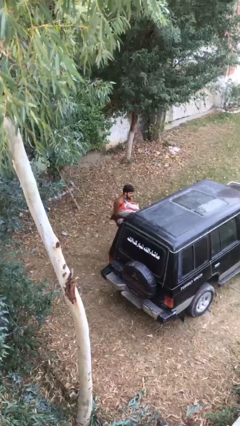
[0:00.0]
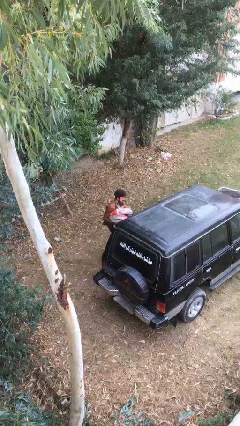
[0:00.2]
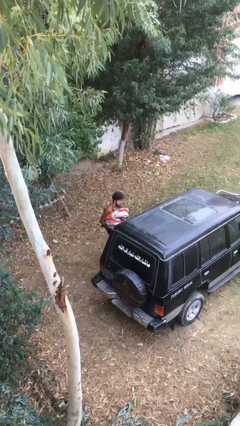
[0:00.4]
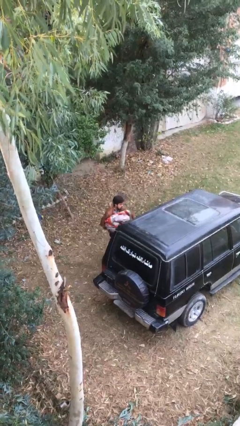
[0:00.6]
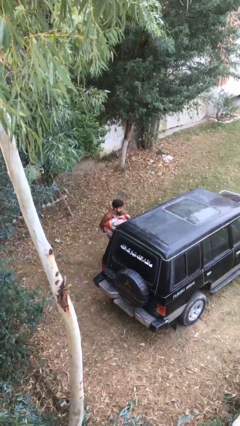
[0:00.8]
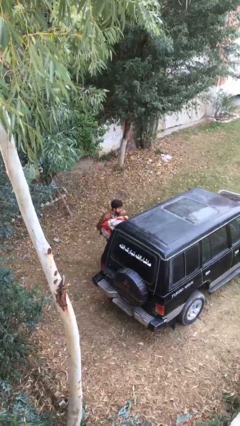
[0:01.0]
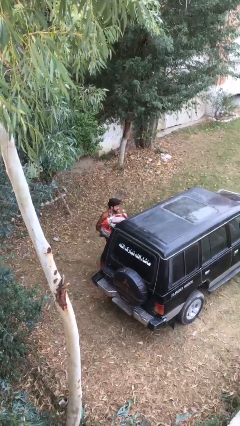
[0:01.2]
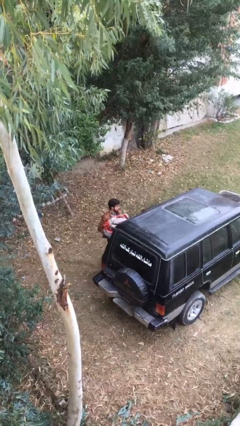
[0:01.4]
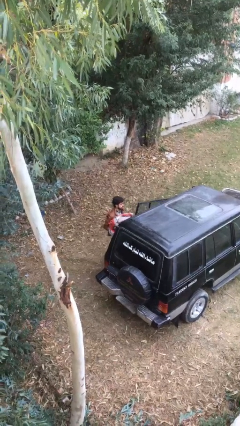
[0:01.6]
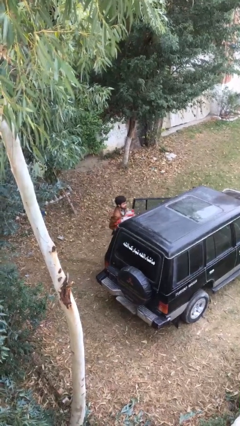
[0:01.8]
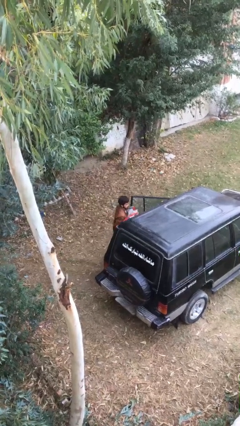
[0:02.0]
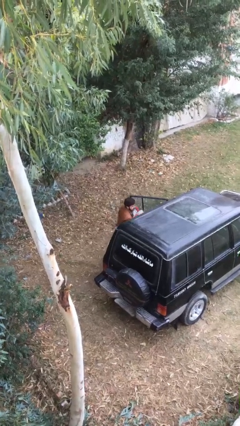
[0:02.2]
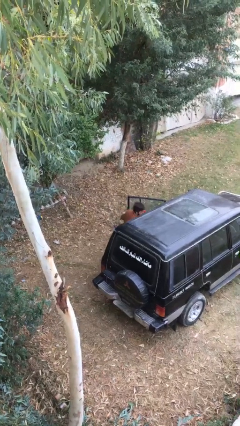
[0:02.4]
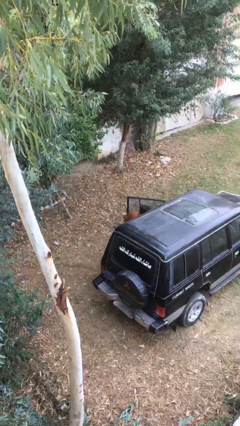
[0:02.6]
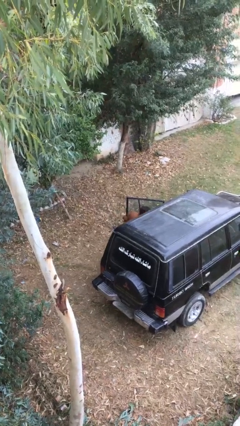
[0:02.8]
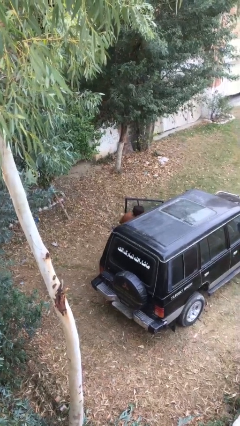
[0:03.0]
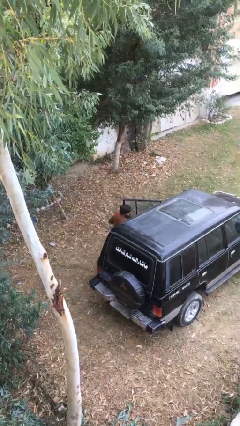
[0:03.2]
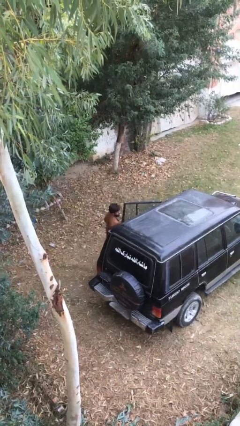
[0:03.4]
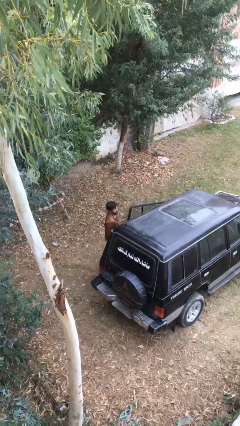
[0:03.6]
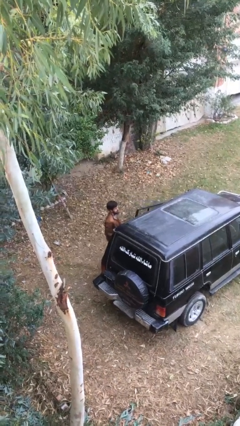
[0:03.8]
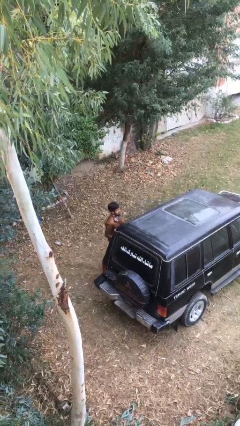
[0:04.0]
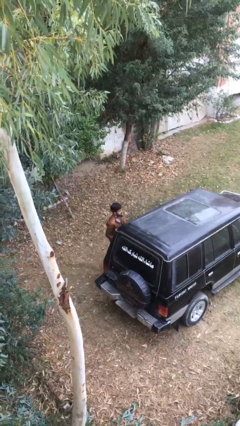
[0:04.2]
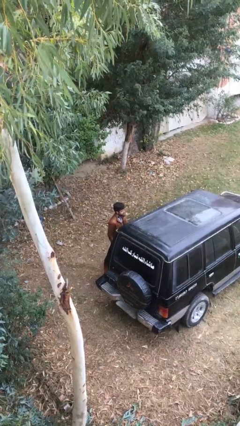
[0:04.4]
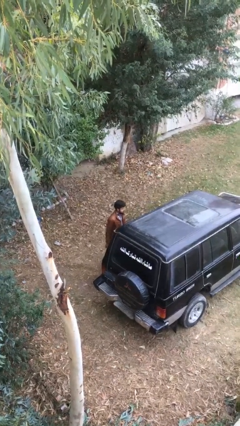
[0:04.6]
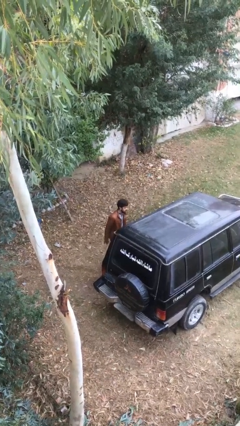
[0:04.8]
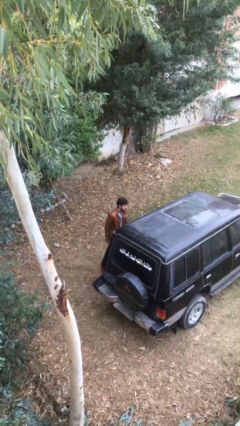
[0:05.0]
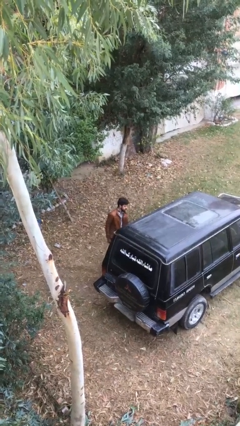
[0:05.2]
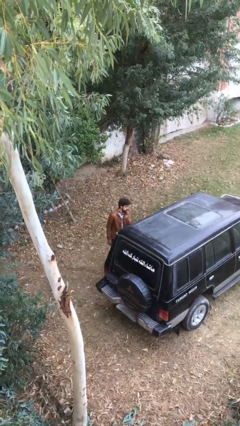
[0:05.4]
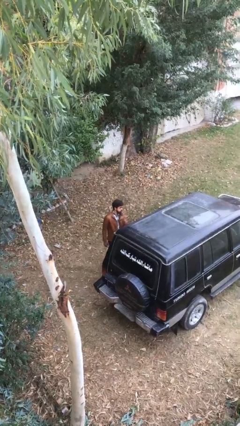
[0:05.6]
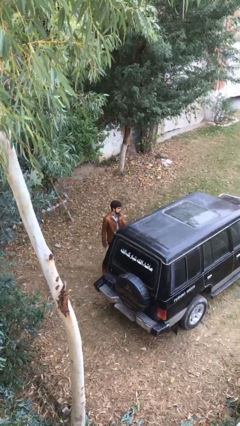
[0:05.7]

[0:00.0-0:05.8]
person loads car

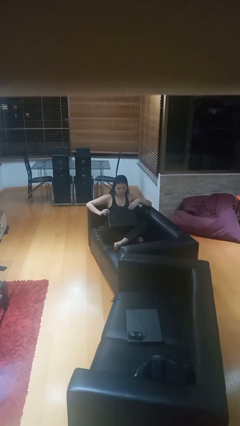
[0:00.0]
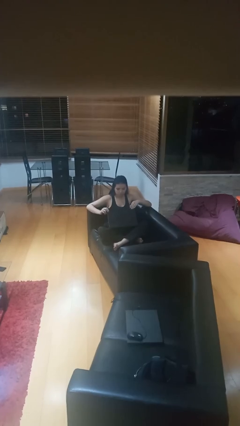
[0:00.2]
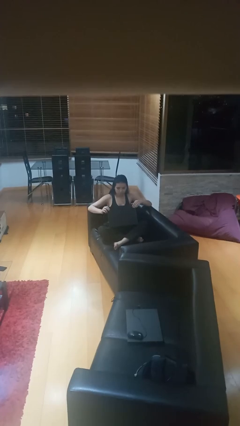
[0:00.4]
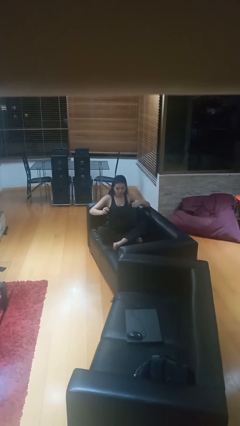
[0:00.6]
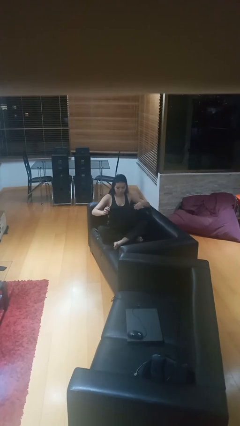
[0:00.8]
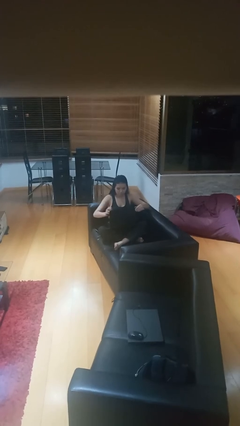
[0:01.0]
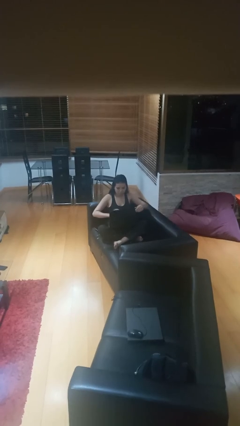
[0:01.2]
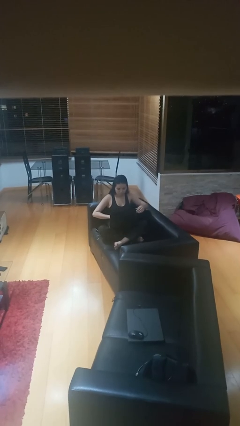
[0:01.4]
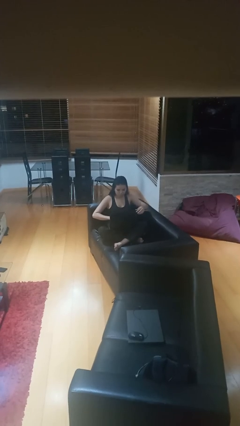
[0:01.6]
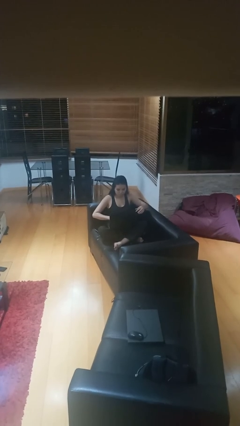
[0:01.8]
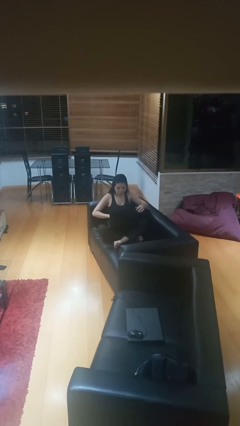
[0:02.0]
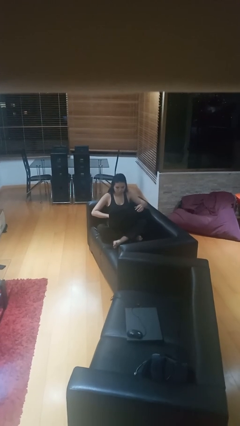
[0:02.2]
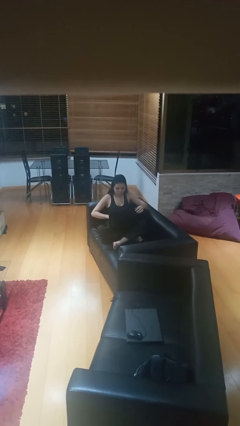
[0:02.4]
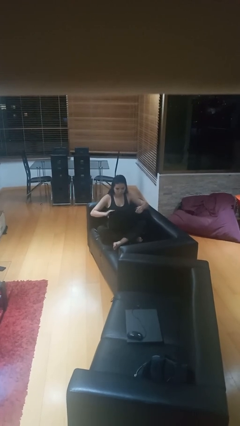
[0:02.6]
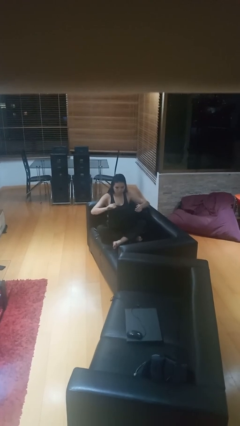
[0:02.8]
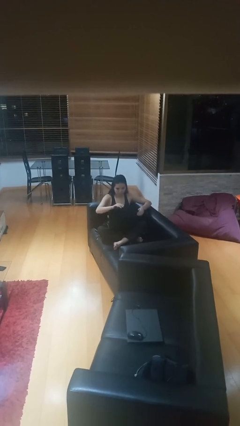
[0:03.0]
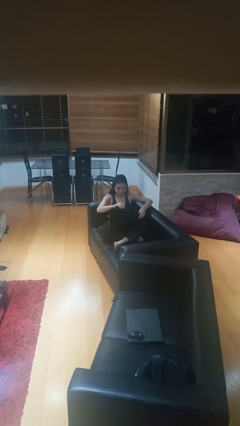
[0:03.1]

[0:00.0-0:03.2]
person interacts with laptop

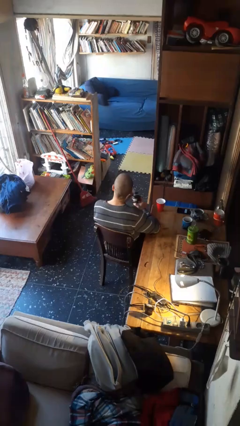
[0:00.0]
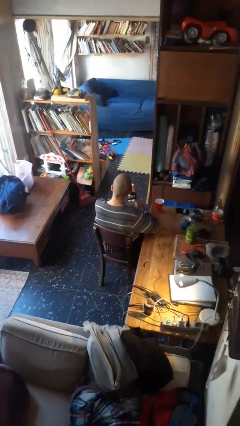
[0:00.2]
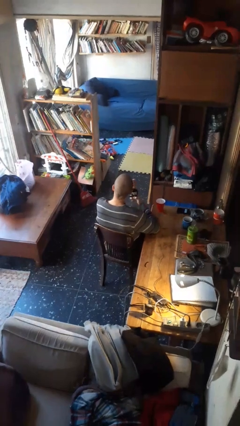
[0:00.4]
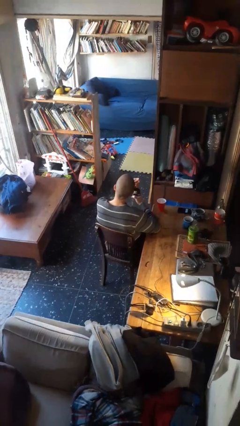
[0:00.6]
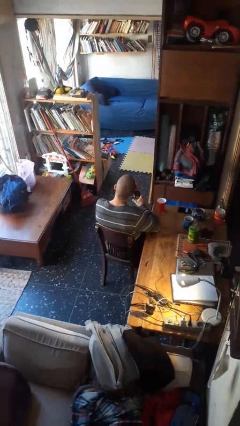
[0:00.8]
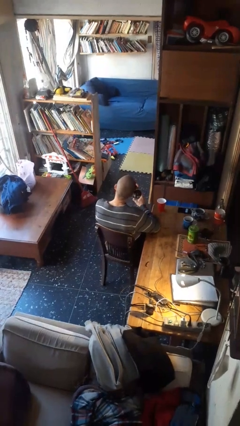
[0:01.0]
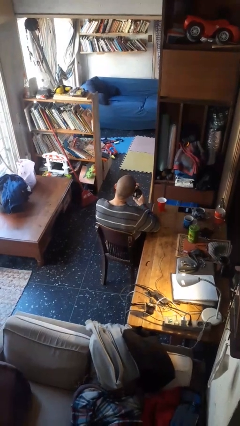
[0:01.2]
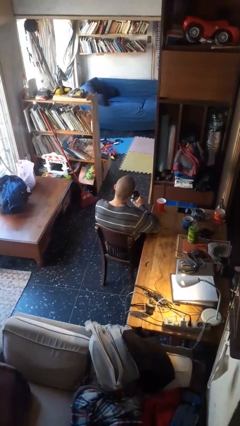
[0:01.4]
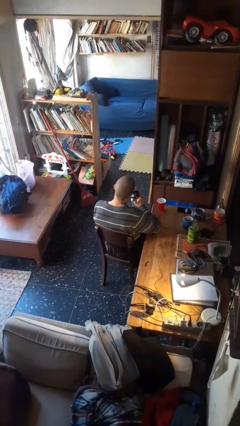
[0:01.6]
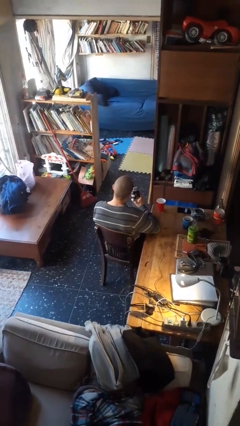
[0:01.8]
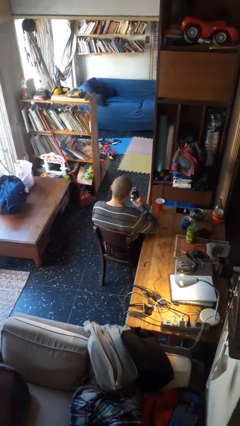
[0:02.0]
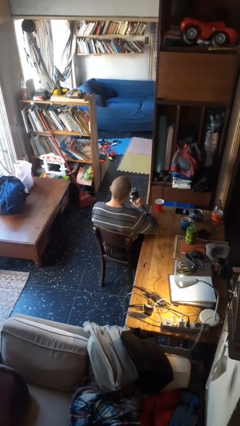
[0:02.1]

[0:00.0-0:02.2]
person unscrews lid from bottle

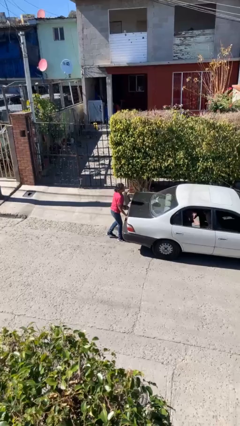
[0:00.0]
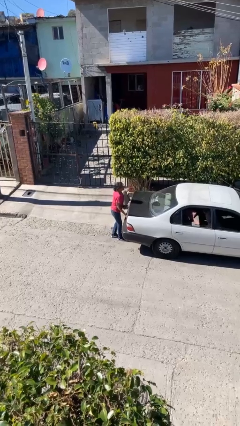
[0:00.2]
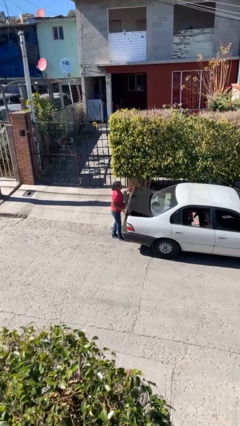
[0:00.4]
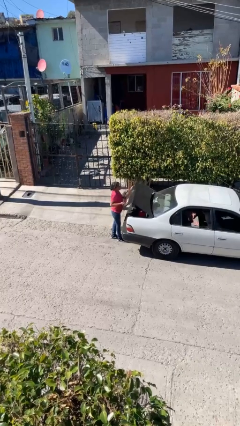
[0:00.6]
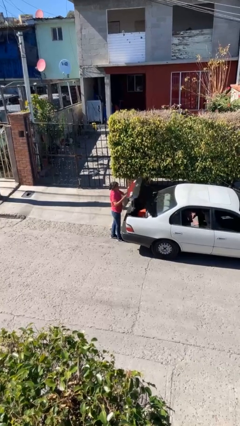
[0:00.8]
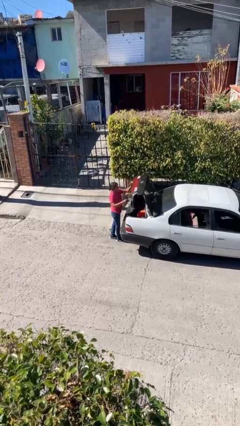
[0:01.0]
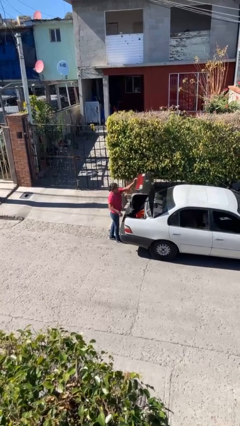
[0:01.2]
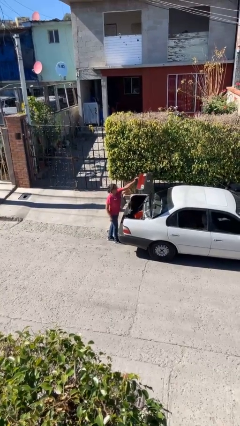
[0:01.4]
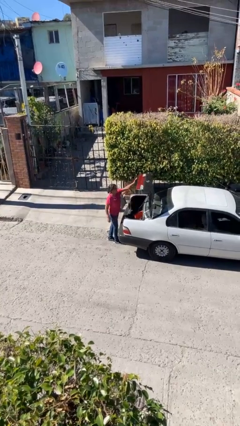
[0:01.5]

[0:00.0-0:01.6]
person opens car trunk

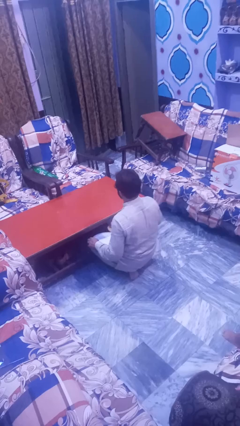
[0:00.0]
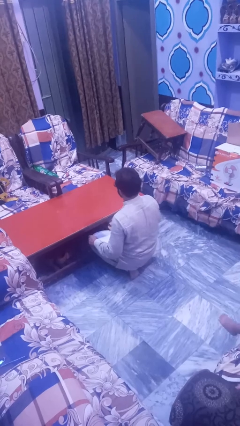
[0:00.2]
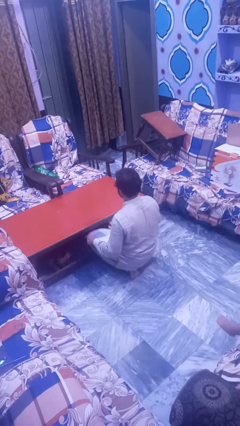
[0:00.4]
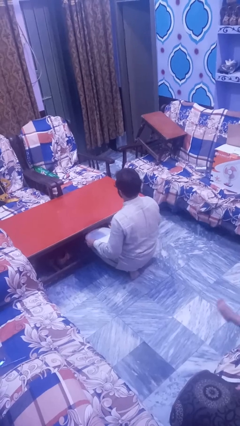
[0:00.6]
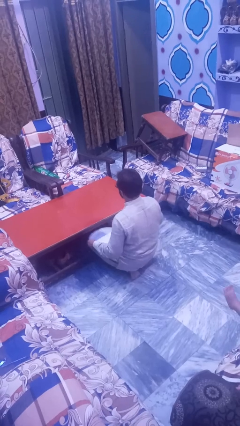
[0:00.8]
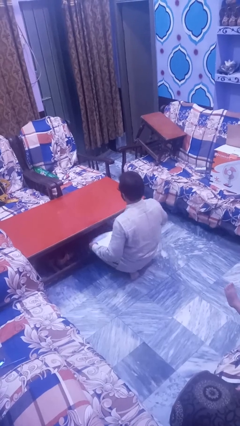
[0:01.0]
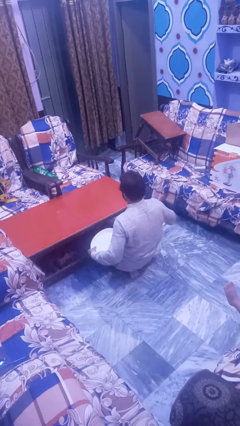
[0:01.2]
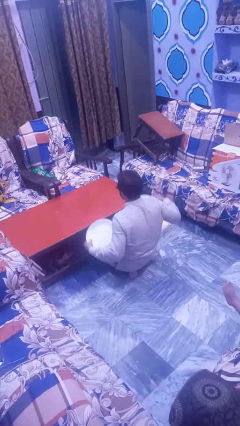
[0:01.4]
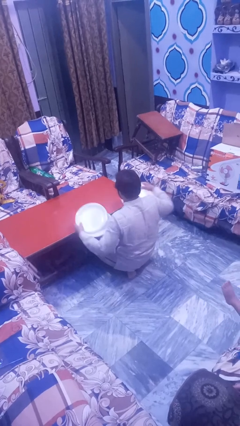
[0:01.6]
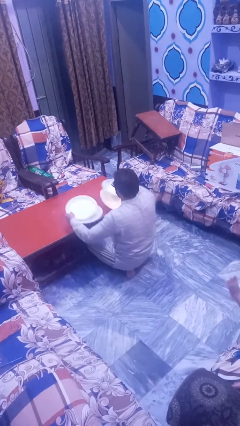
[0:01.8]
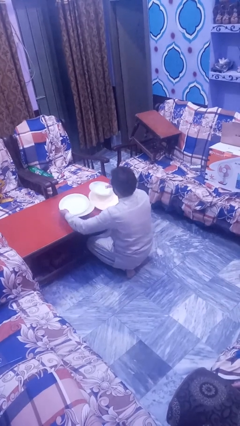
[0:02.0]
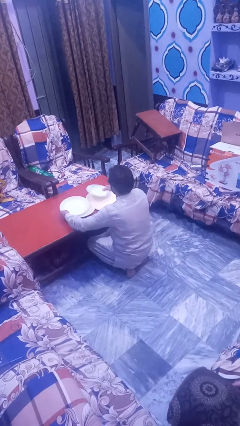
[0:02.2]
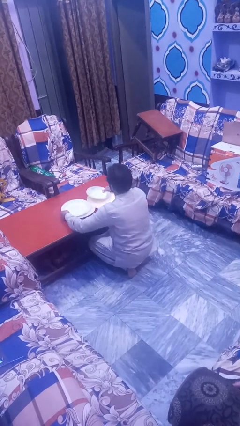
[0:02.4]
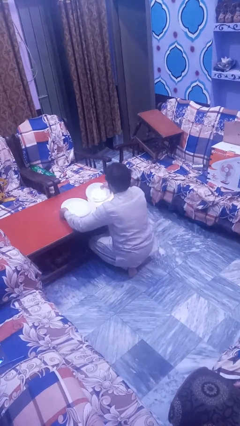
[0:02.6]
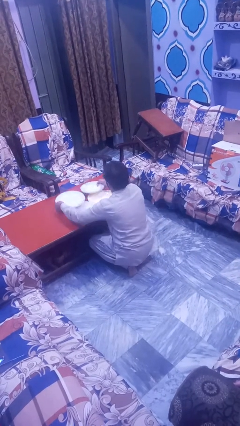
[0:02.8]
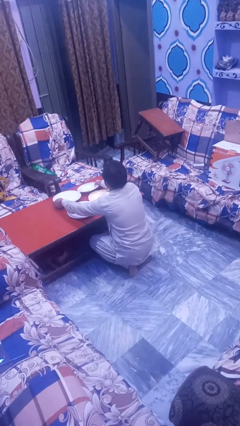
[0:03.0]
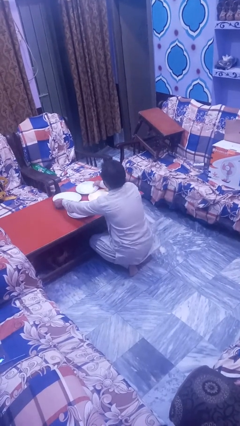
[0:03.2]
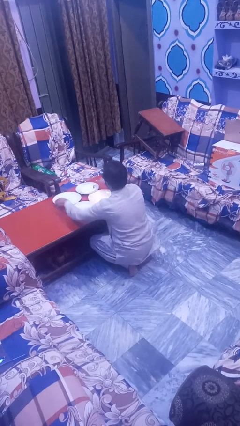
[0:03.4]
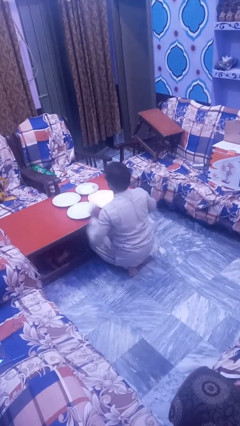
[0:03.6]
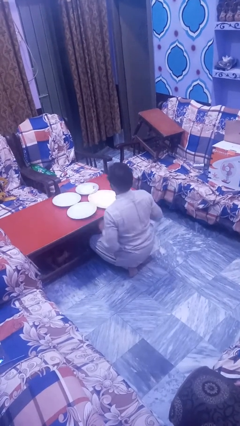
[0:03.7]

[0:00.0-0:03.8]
person sets table

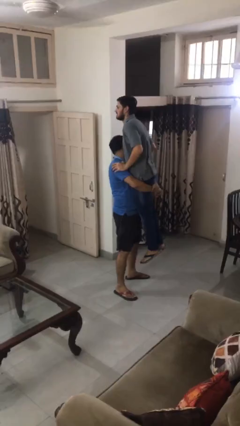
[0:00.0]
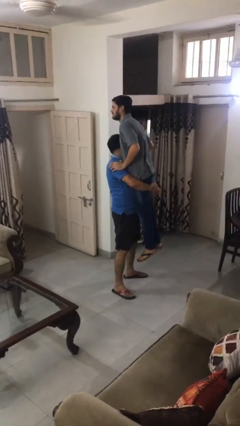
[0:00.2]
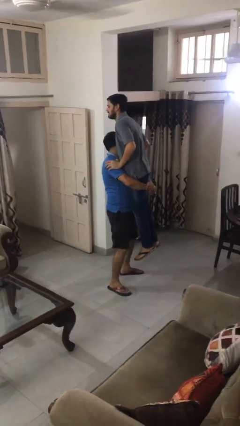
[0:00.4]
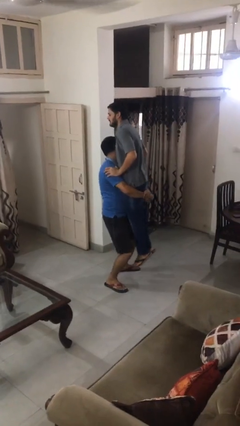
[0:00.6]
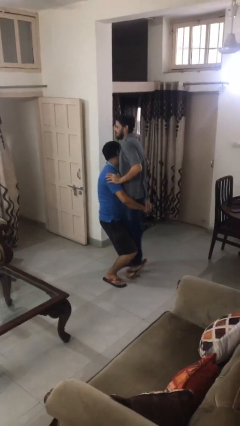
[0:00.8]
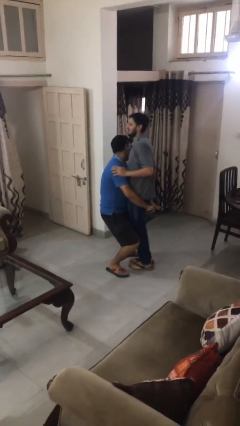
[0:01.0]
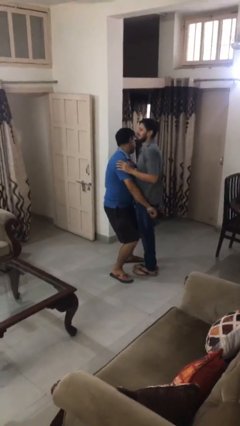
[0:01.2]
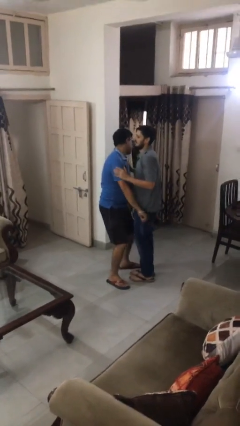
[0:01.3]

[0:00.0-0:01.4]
person puts down person
